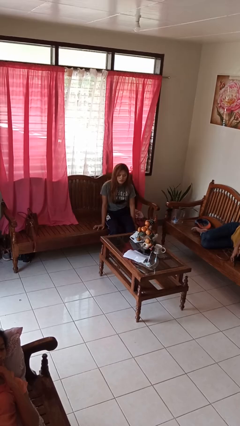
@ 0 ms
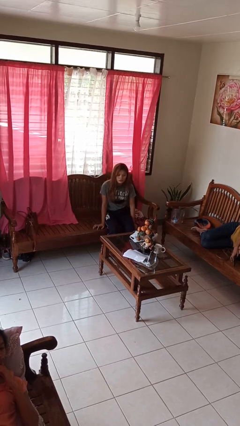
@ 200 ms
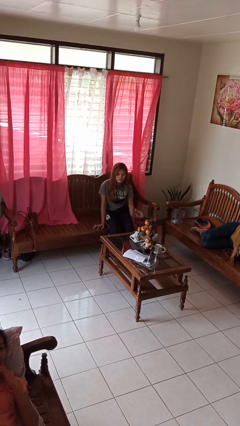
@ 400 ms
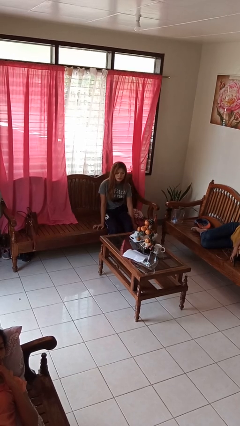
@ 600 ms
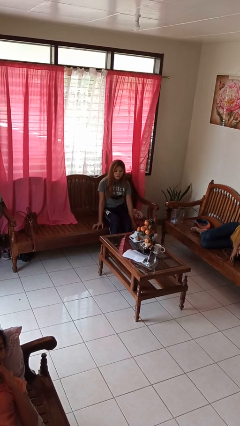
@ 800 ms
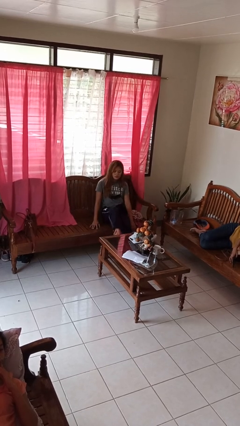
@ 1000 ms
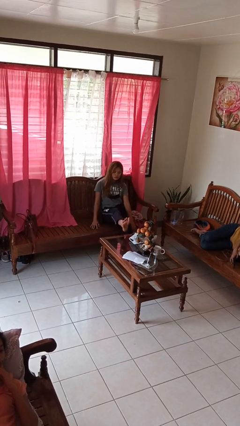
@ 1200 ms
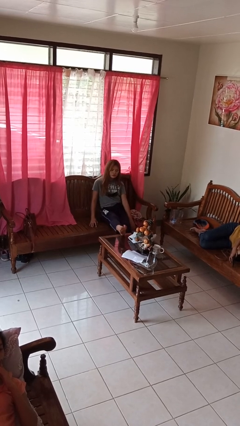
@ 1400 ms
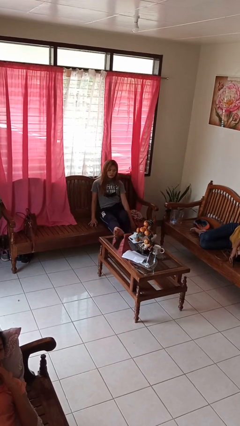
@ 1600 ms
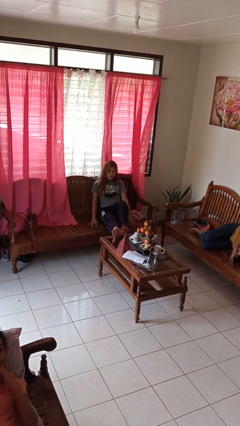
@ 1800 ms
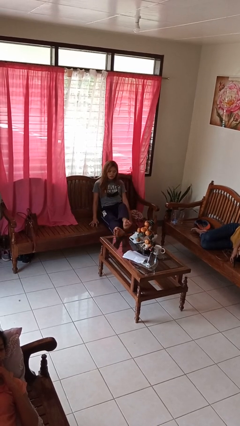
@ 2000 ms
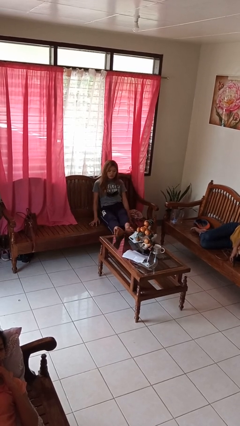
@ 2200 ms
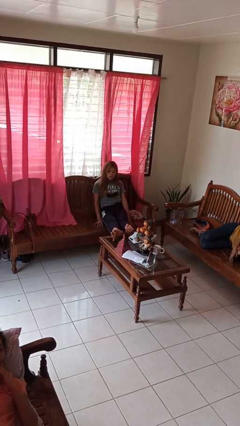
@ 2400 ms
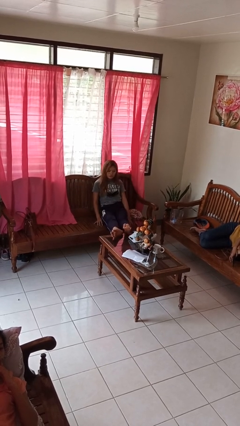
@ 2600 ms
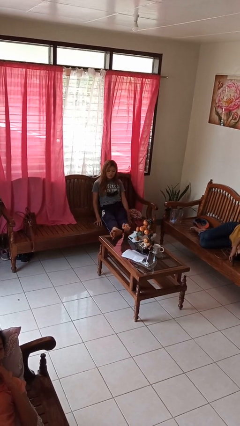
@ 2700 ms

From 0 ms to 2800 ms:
person puts feet up

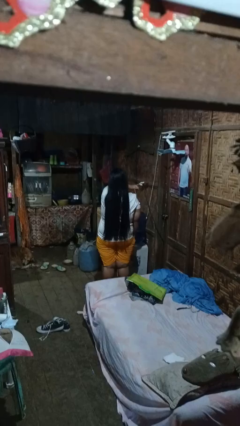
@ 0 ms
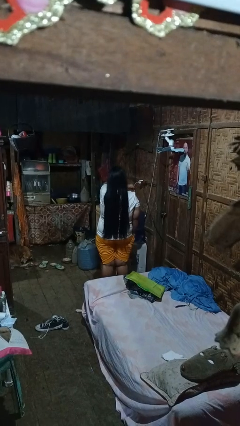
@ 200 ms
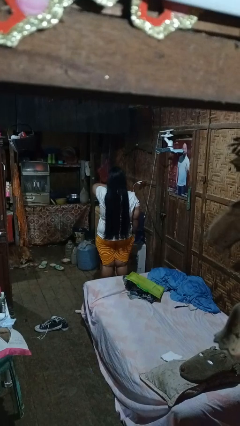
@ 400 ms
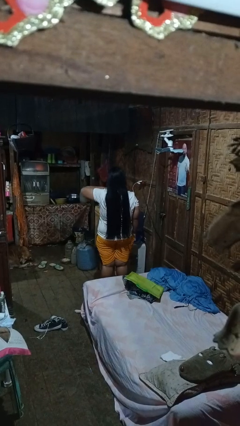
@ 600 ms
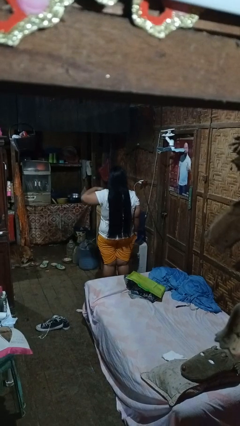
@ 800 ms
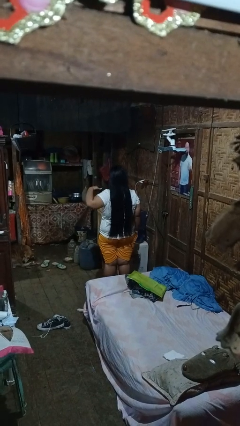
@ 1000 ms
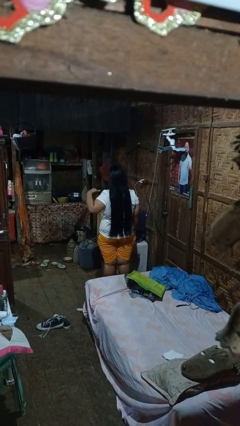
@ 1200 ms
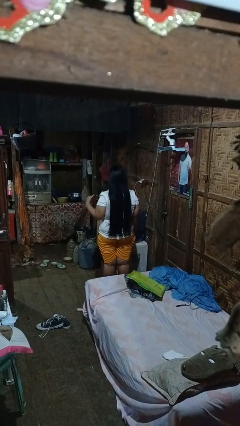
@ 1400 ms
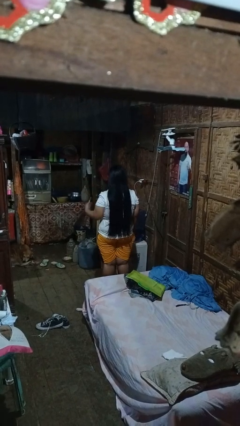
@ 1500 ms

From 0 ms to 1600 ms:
person gestures cut

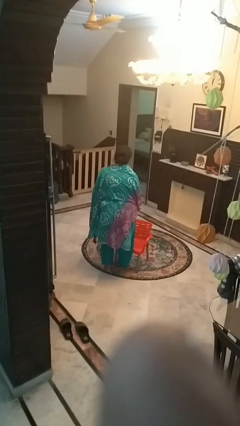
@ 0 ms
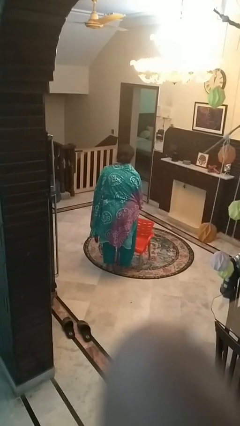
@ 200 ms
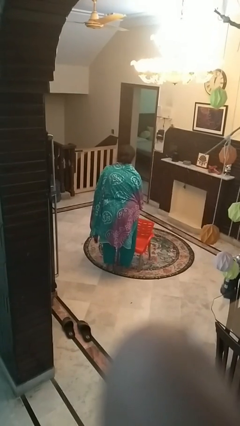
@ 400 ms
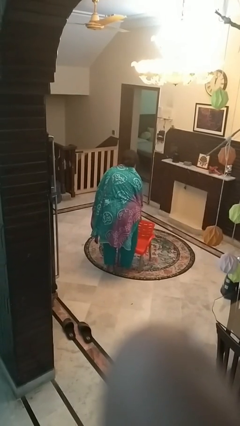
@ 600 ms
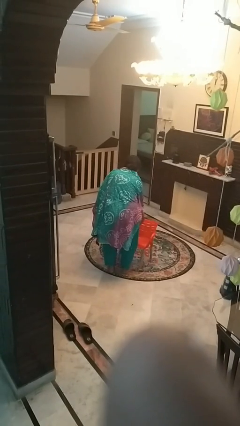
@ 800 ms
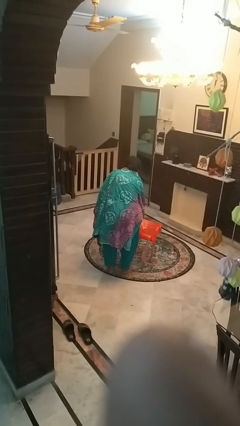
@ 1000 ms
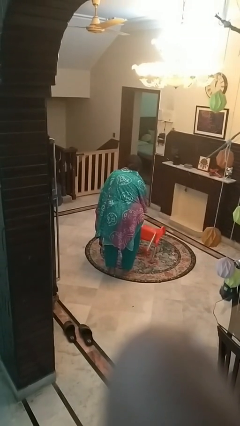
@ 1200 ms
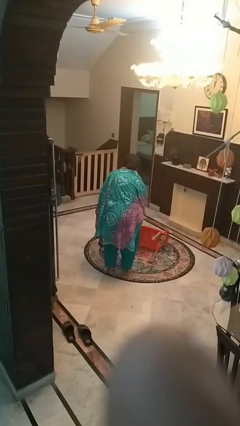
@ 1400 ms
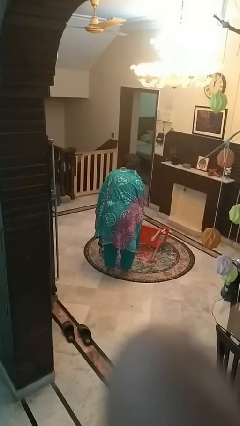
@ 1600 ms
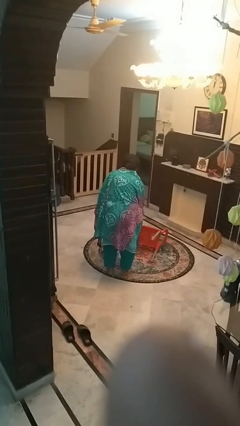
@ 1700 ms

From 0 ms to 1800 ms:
person knocks over furniture

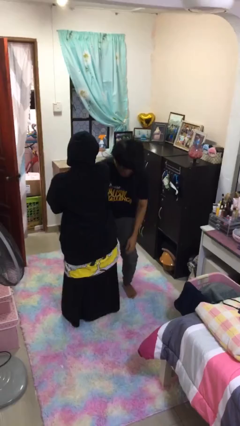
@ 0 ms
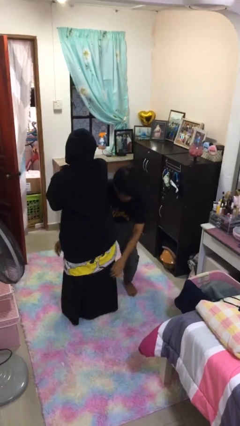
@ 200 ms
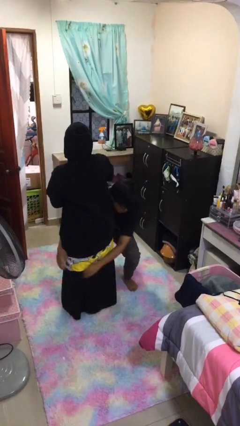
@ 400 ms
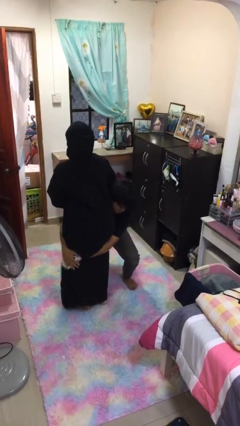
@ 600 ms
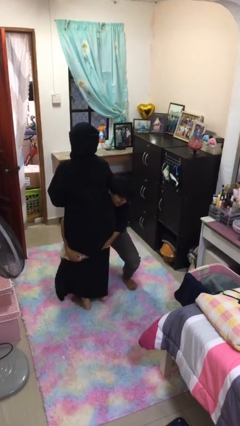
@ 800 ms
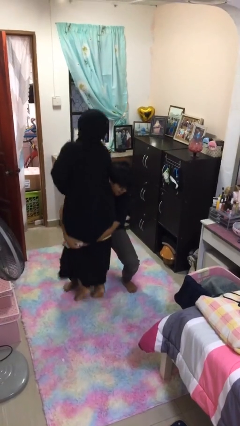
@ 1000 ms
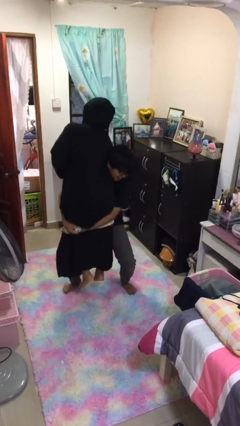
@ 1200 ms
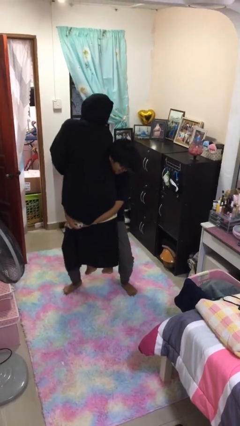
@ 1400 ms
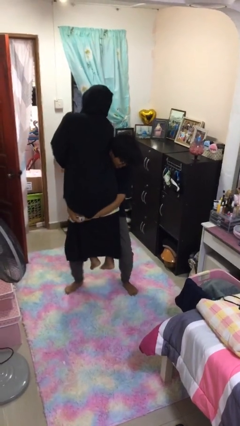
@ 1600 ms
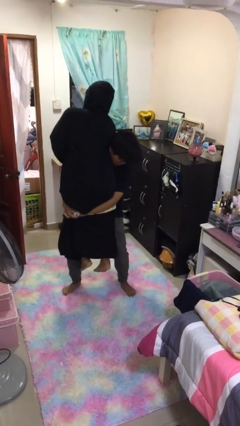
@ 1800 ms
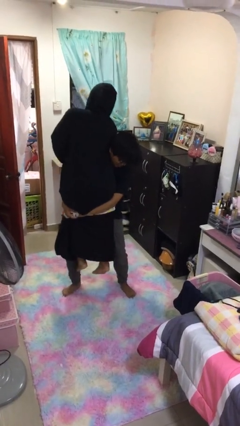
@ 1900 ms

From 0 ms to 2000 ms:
person picks up person

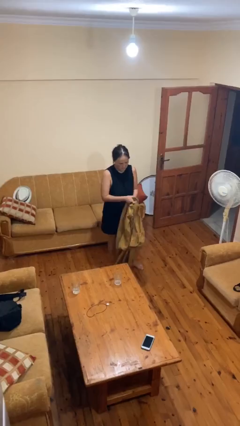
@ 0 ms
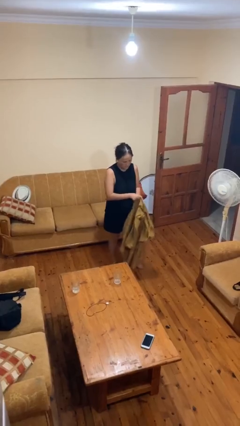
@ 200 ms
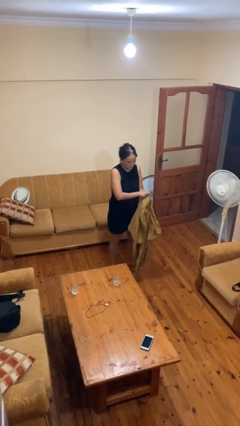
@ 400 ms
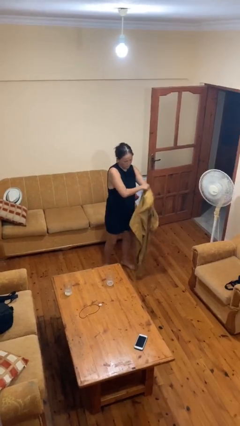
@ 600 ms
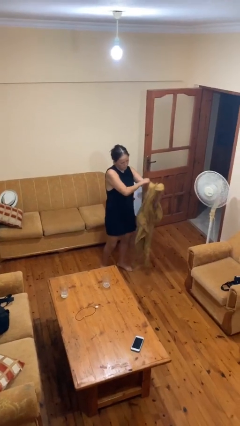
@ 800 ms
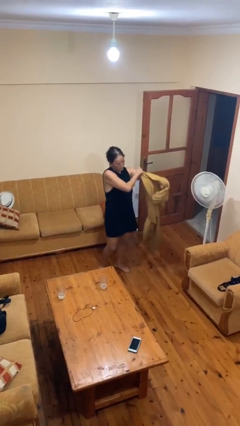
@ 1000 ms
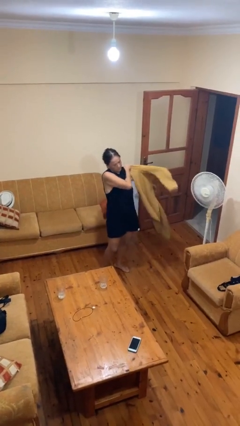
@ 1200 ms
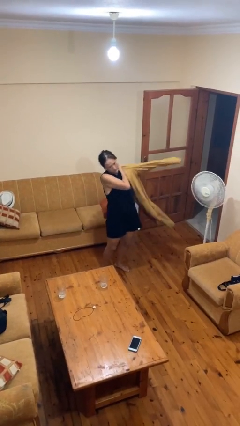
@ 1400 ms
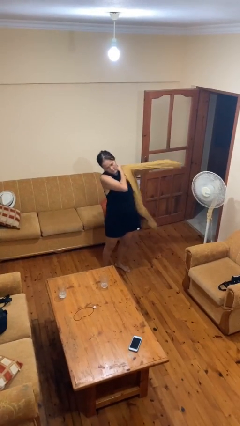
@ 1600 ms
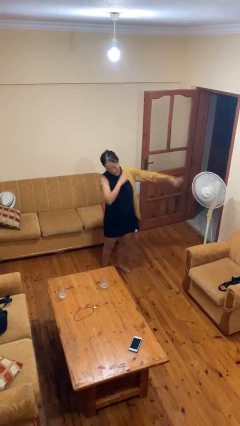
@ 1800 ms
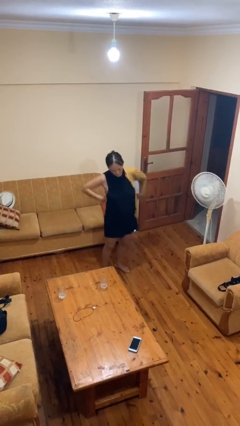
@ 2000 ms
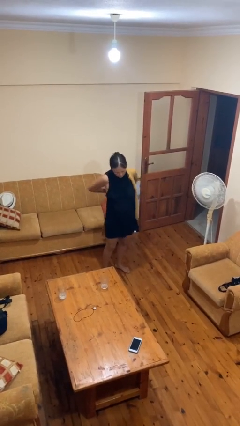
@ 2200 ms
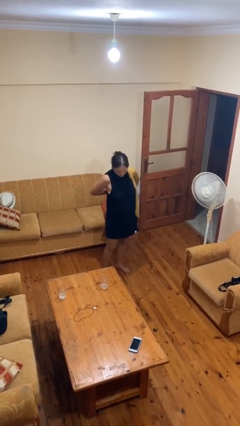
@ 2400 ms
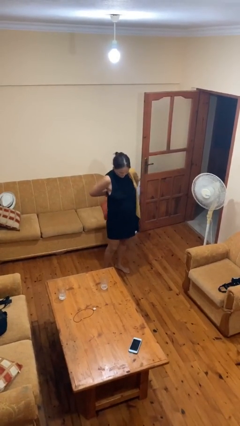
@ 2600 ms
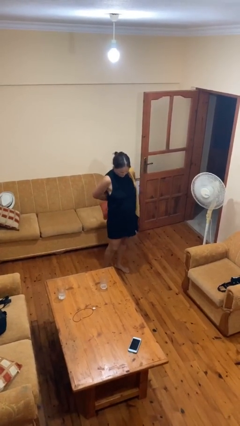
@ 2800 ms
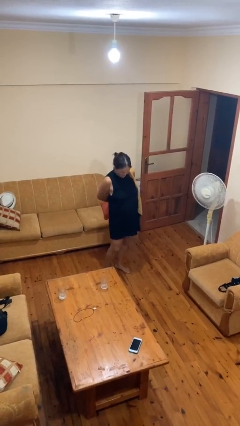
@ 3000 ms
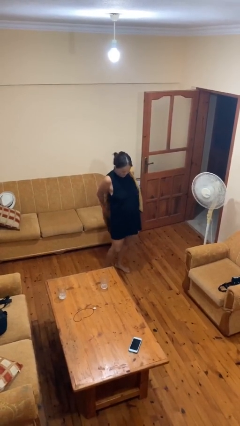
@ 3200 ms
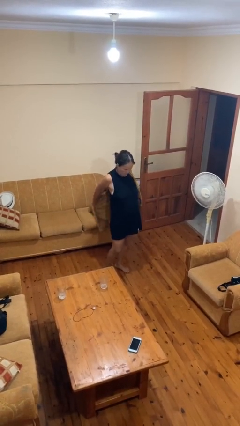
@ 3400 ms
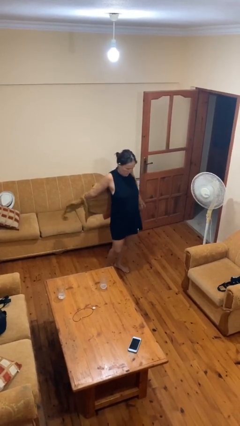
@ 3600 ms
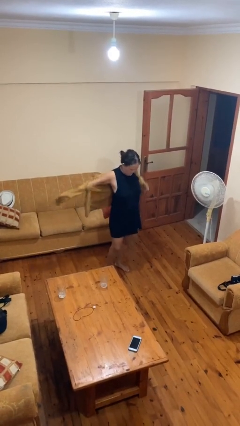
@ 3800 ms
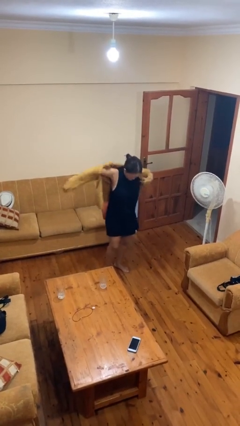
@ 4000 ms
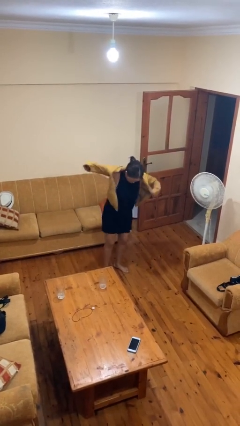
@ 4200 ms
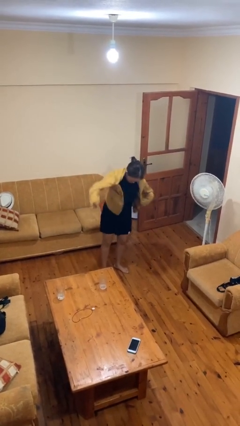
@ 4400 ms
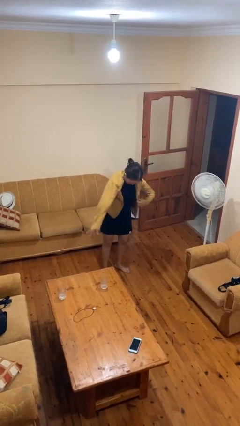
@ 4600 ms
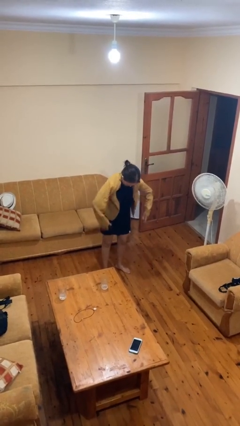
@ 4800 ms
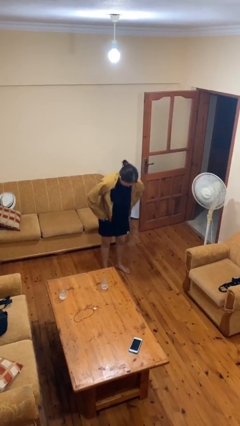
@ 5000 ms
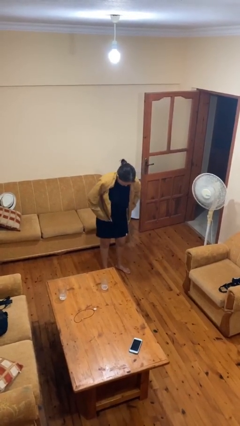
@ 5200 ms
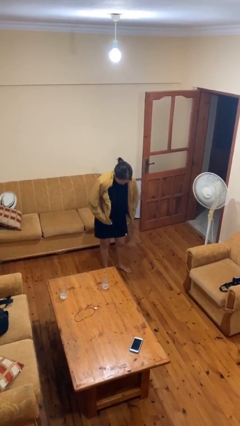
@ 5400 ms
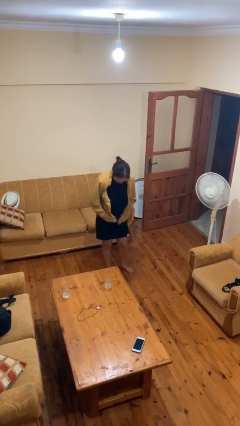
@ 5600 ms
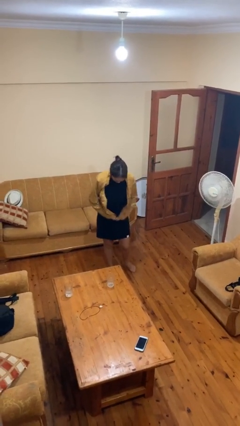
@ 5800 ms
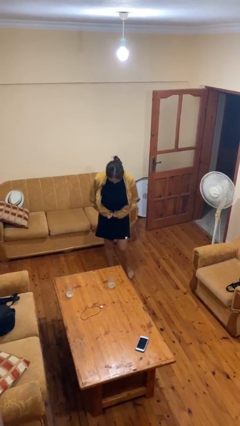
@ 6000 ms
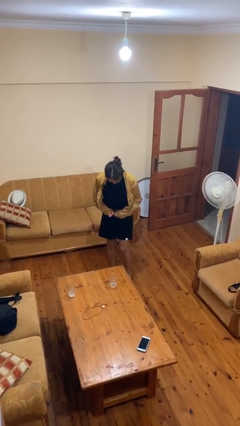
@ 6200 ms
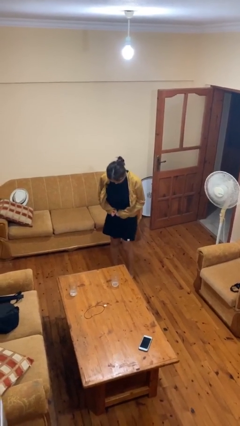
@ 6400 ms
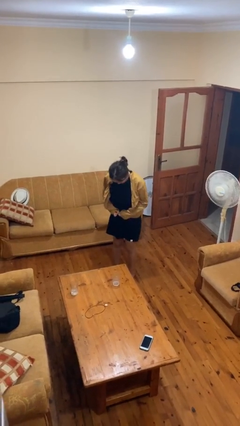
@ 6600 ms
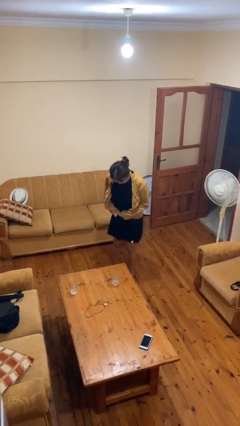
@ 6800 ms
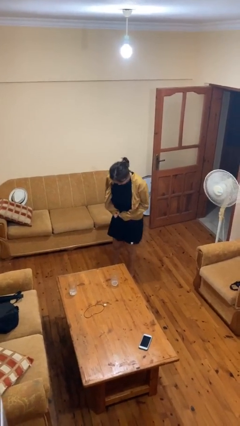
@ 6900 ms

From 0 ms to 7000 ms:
person puts on jacket

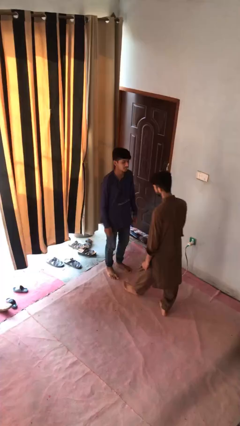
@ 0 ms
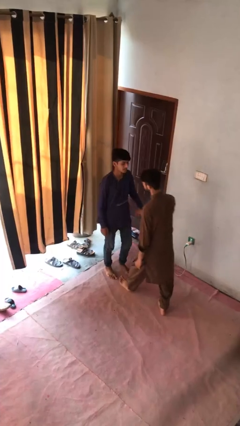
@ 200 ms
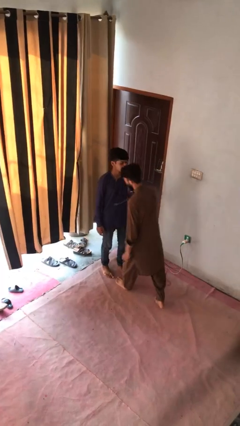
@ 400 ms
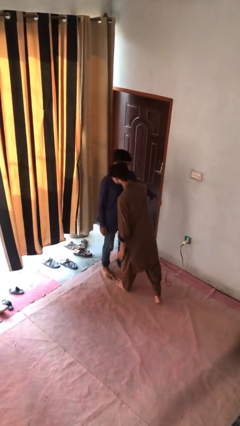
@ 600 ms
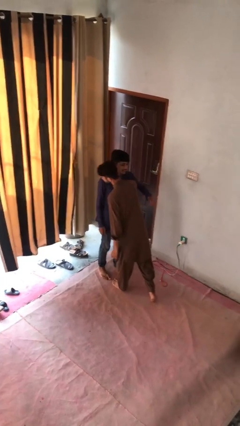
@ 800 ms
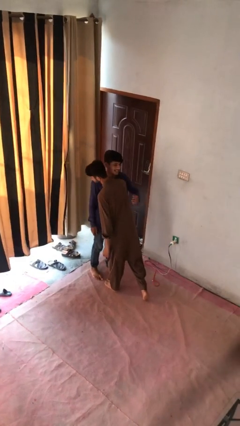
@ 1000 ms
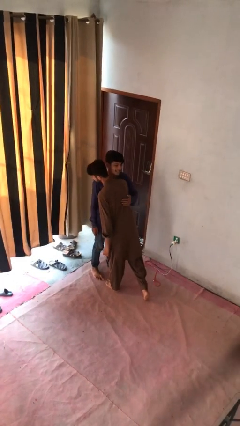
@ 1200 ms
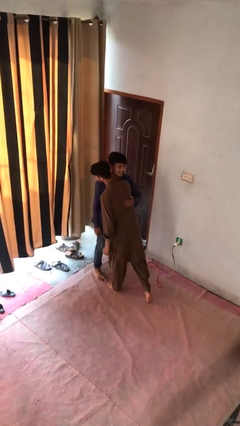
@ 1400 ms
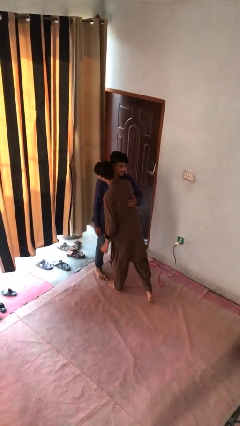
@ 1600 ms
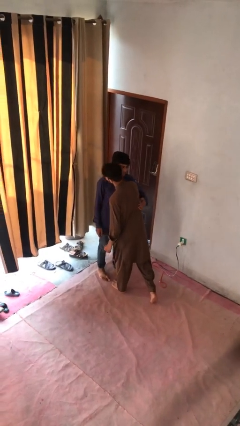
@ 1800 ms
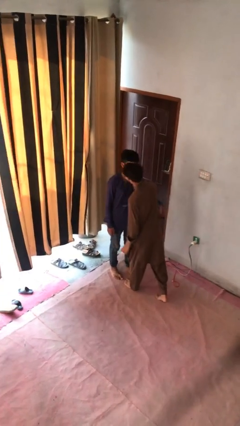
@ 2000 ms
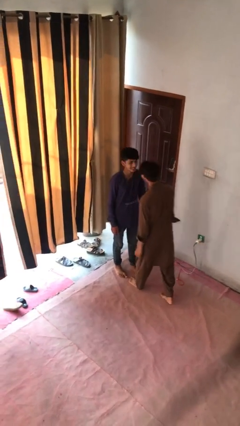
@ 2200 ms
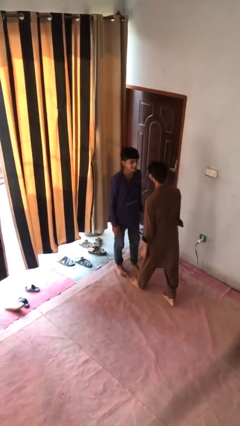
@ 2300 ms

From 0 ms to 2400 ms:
person embraces person
